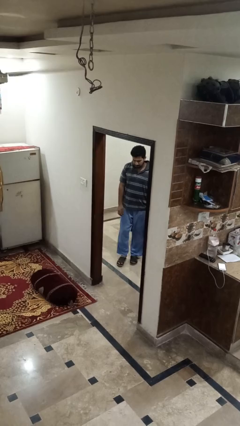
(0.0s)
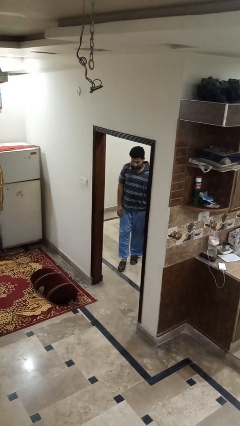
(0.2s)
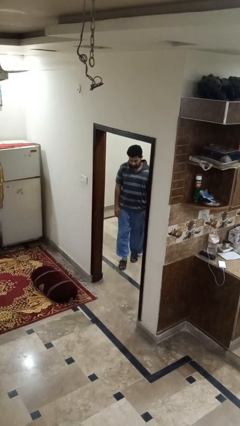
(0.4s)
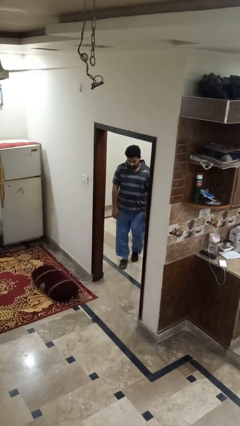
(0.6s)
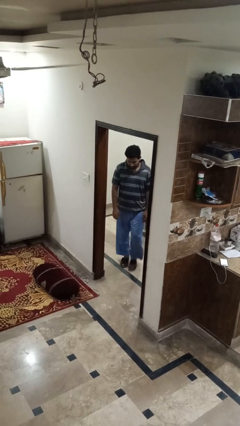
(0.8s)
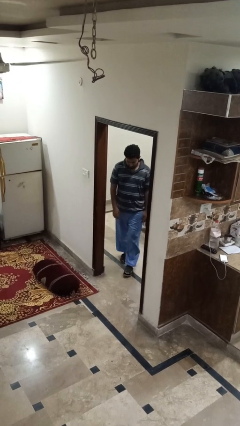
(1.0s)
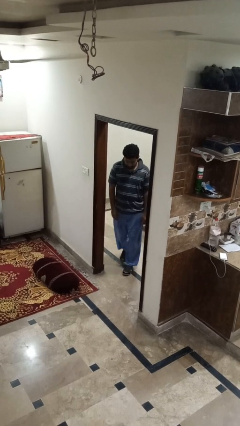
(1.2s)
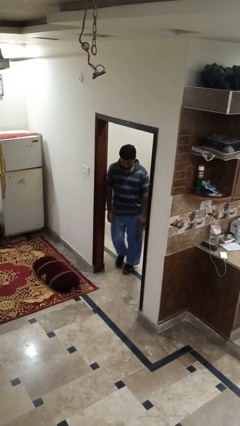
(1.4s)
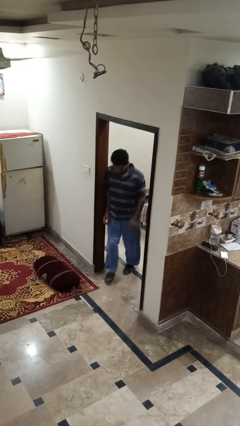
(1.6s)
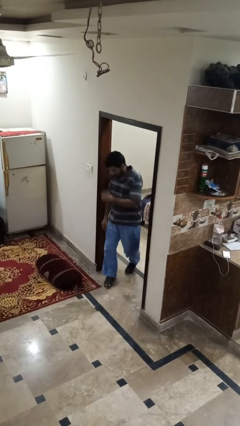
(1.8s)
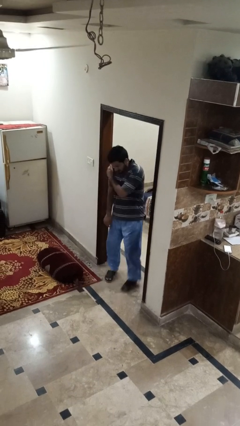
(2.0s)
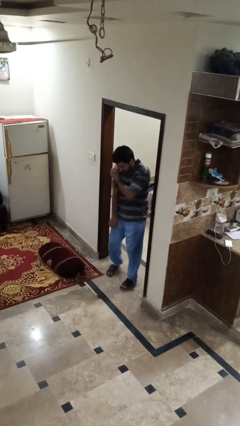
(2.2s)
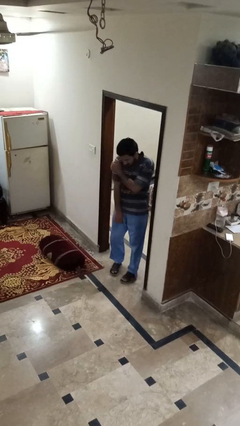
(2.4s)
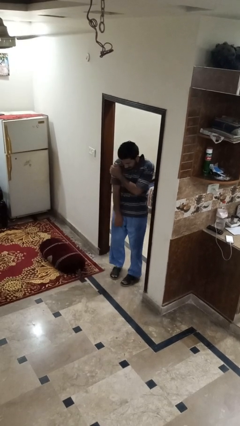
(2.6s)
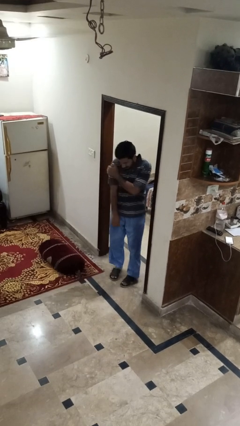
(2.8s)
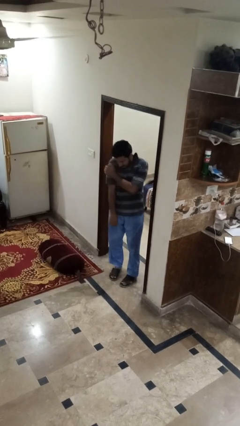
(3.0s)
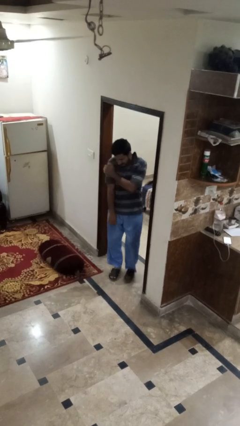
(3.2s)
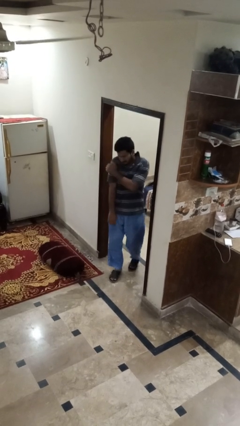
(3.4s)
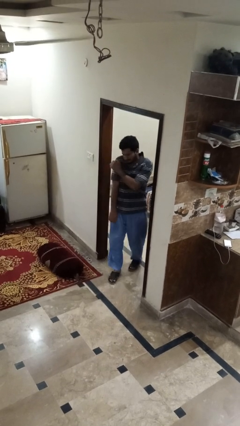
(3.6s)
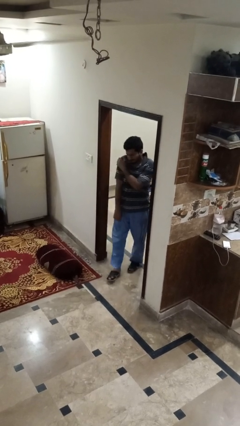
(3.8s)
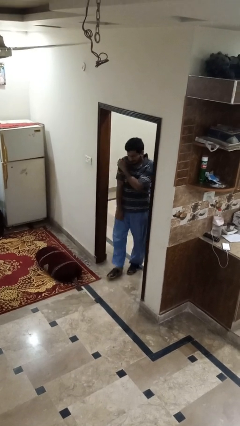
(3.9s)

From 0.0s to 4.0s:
person bumps into wall

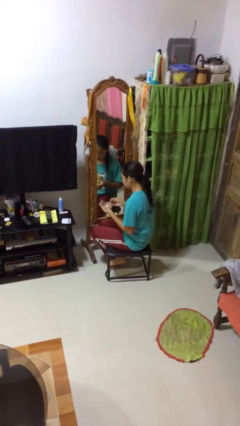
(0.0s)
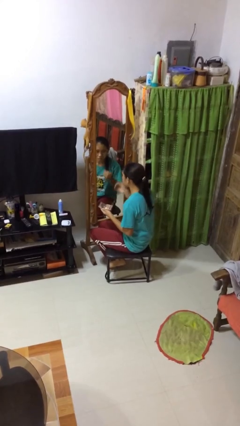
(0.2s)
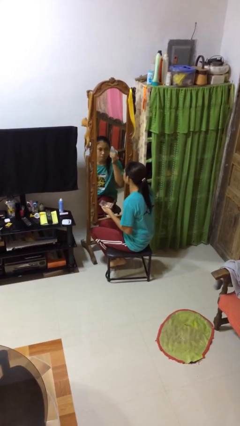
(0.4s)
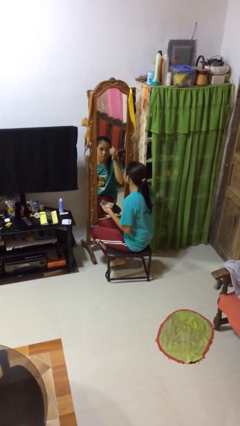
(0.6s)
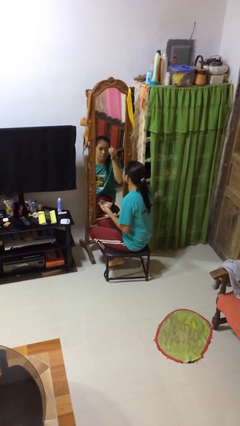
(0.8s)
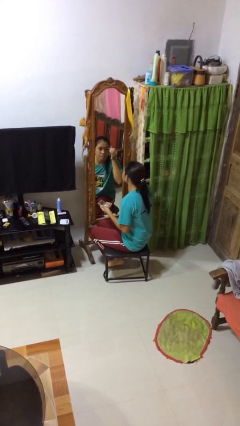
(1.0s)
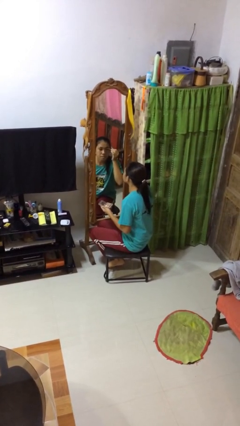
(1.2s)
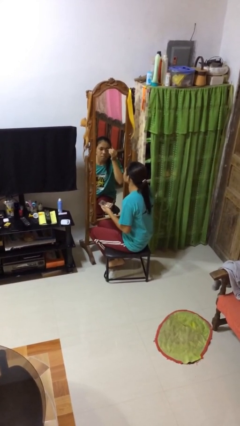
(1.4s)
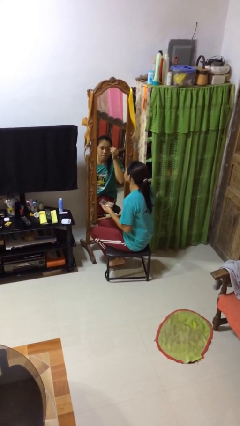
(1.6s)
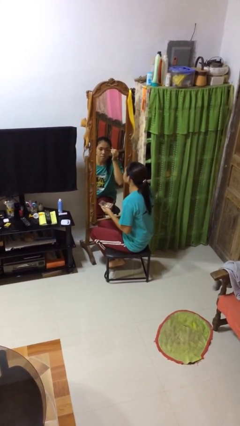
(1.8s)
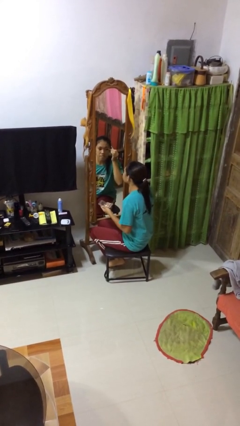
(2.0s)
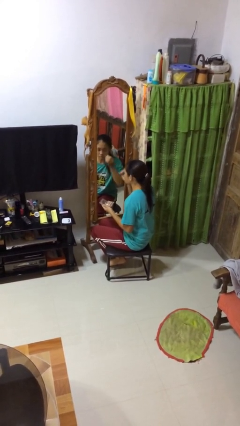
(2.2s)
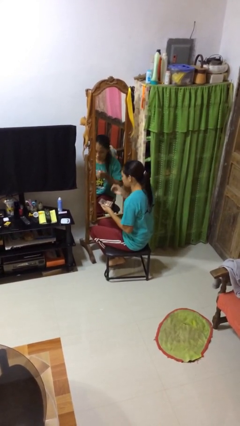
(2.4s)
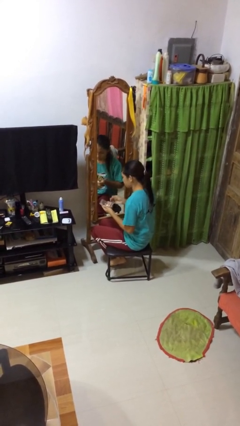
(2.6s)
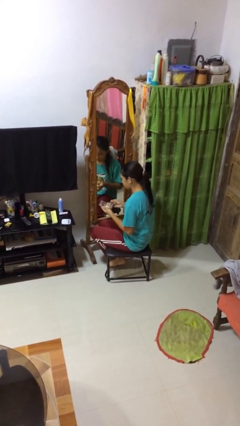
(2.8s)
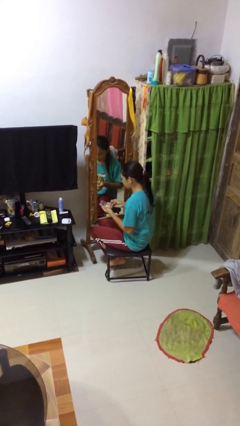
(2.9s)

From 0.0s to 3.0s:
person applies eye makeup

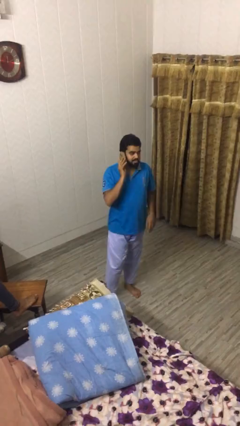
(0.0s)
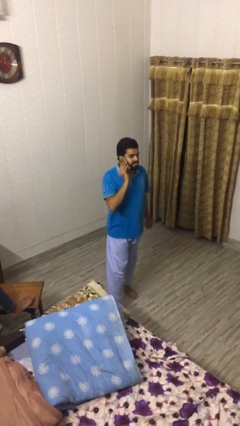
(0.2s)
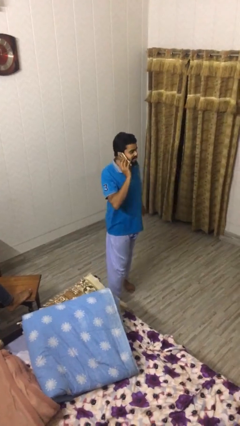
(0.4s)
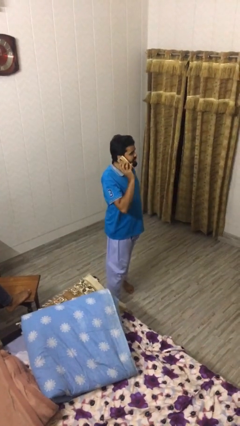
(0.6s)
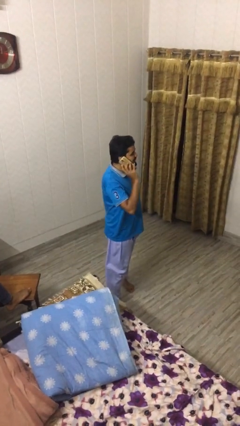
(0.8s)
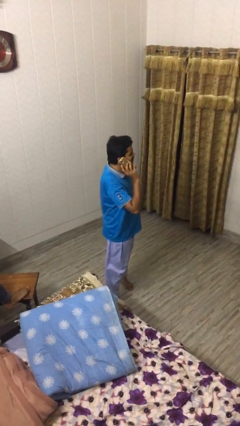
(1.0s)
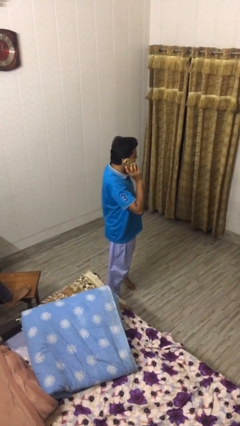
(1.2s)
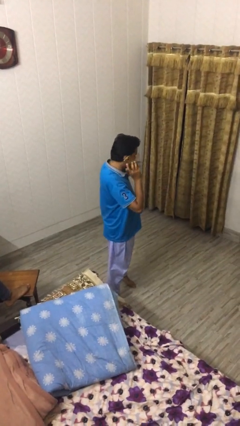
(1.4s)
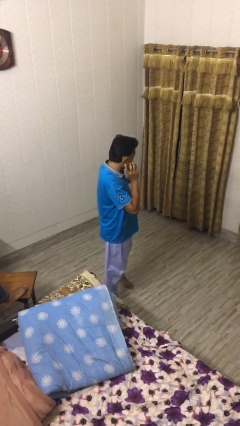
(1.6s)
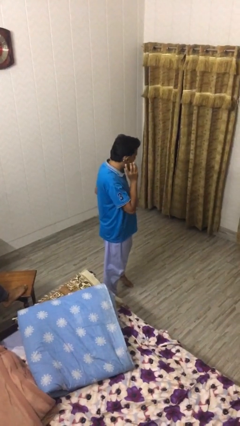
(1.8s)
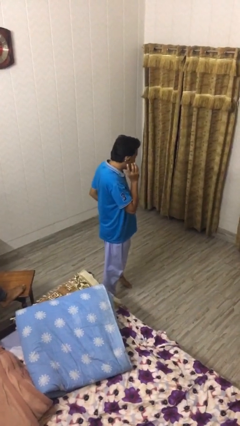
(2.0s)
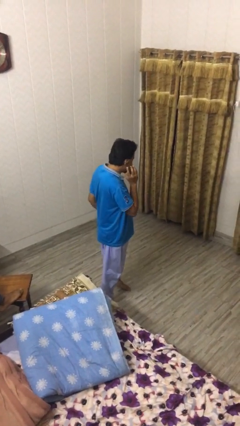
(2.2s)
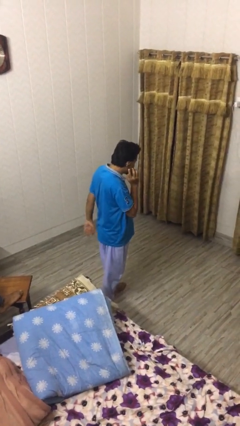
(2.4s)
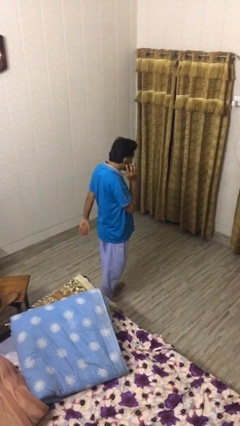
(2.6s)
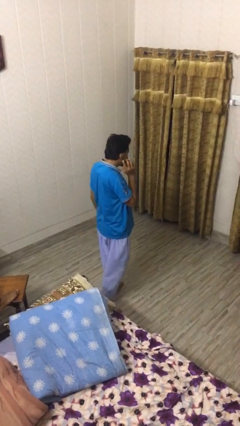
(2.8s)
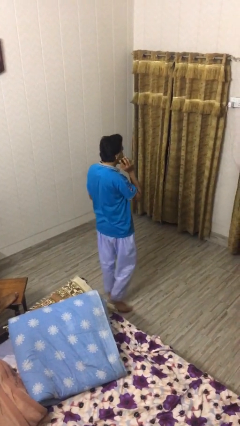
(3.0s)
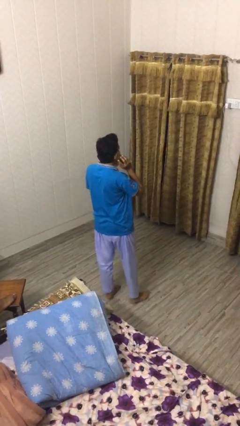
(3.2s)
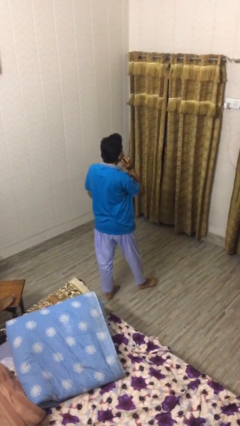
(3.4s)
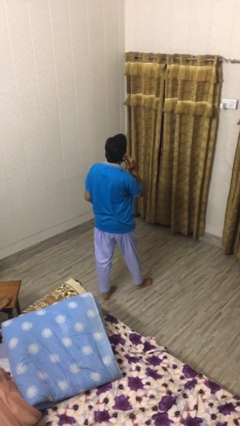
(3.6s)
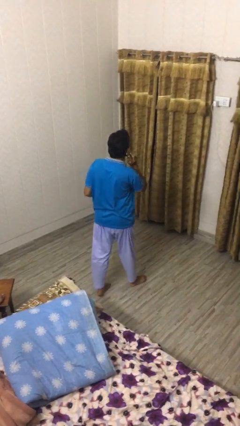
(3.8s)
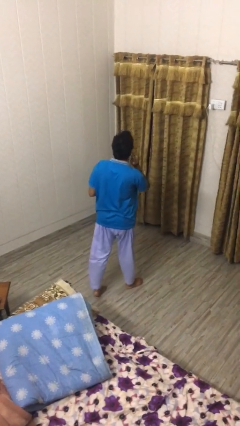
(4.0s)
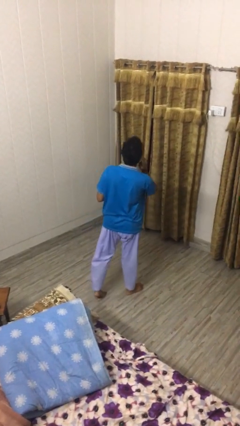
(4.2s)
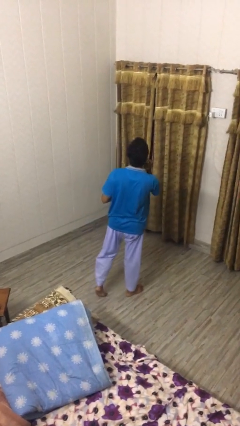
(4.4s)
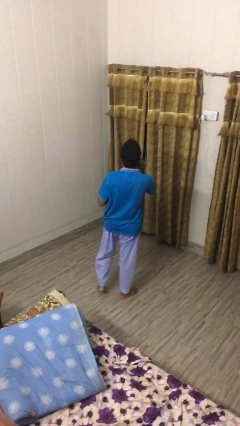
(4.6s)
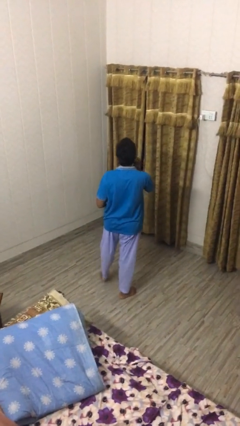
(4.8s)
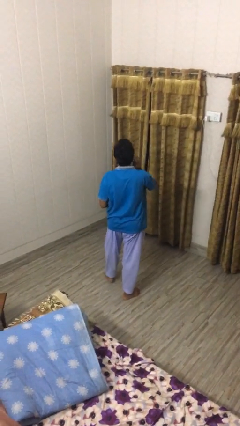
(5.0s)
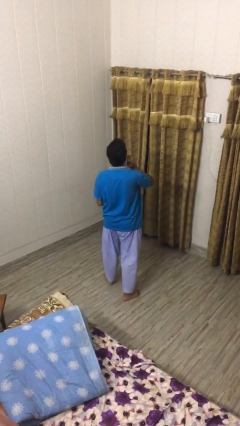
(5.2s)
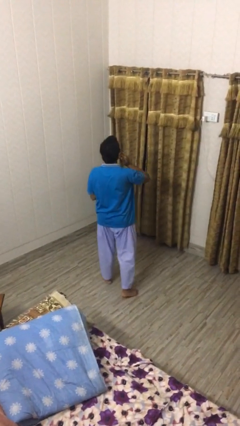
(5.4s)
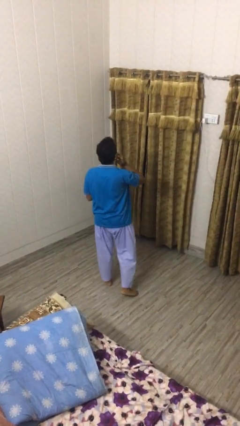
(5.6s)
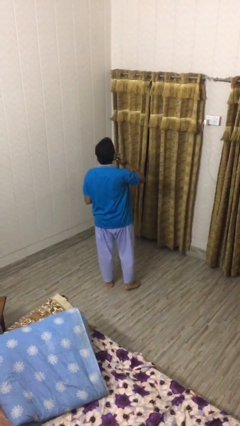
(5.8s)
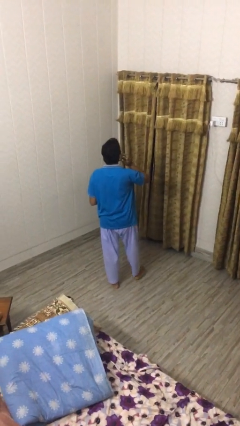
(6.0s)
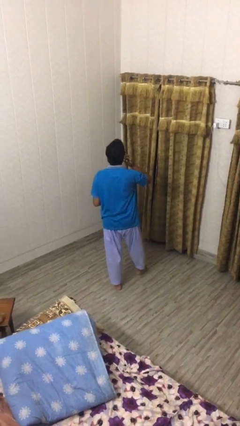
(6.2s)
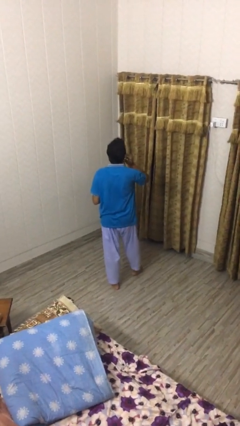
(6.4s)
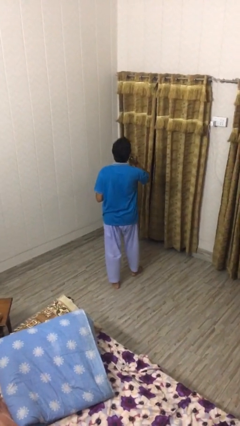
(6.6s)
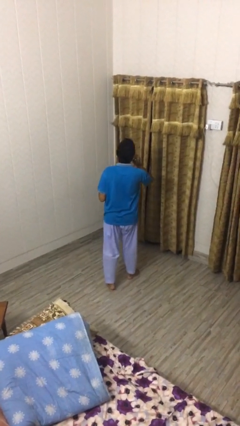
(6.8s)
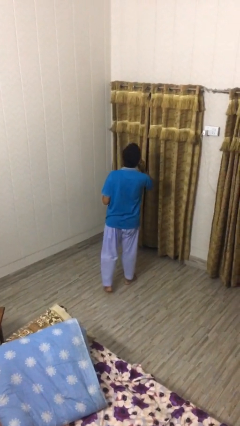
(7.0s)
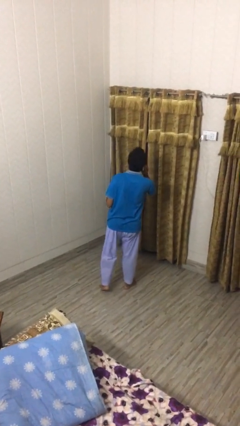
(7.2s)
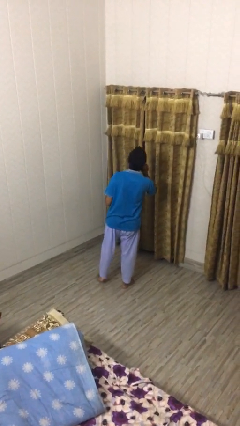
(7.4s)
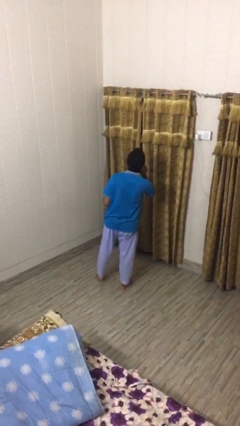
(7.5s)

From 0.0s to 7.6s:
person talks on phone

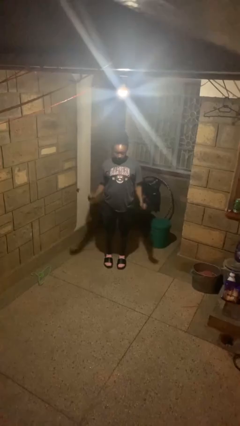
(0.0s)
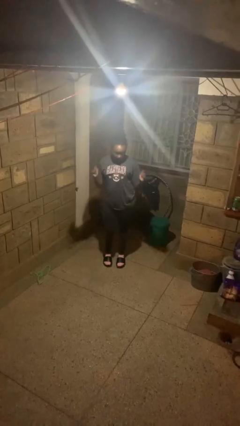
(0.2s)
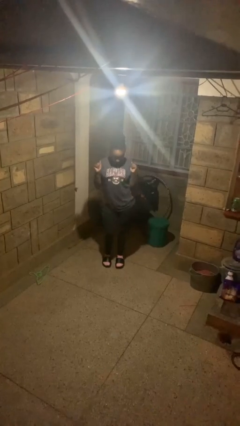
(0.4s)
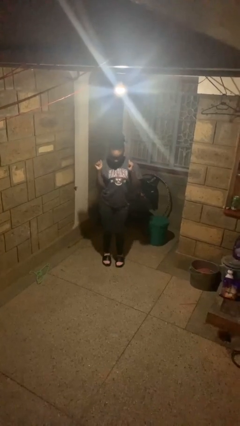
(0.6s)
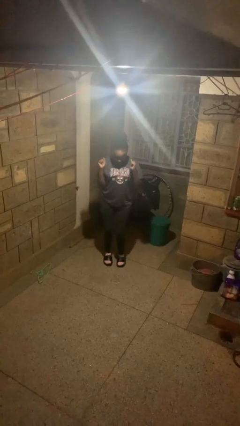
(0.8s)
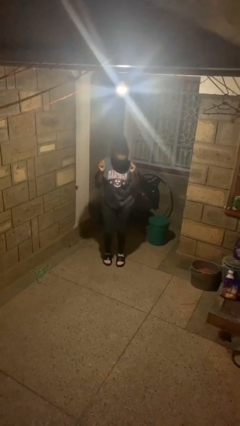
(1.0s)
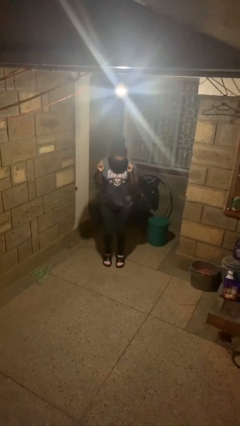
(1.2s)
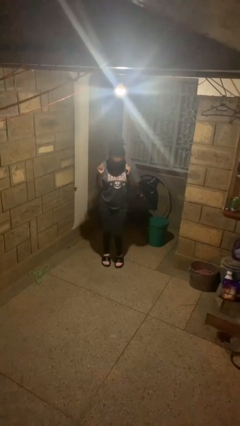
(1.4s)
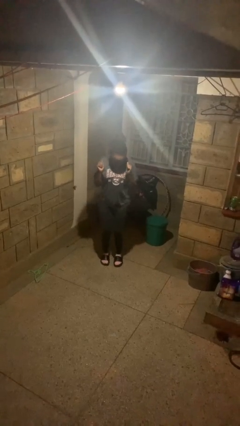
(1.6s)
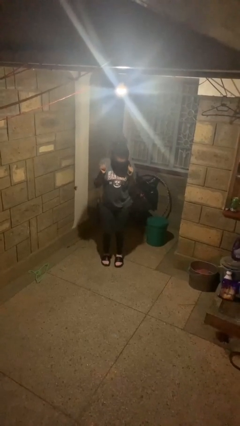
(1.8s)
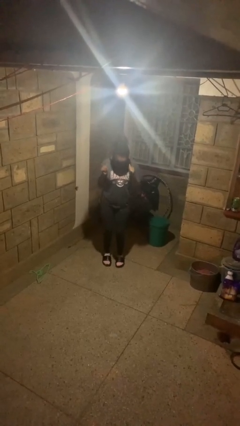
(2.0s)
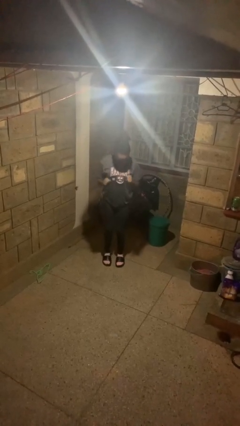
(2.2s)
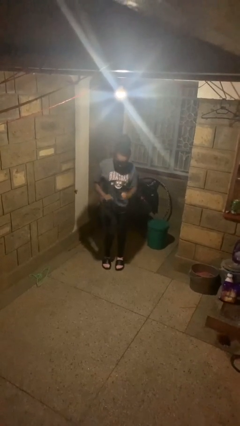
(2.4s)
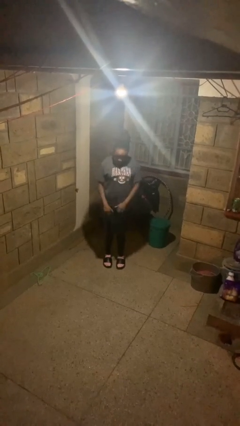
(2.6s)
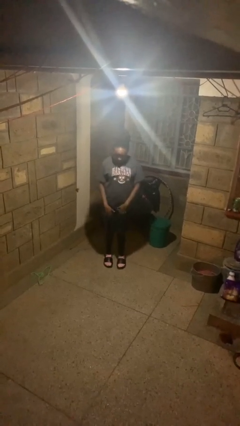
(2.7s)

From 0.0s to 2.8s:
person wiggles hips

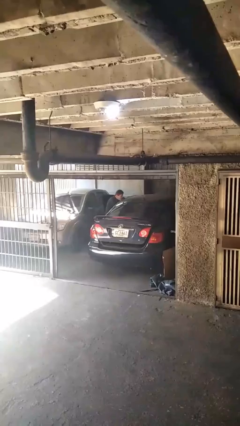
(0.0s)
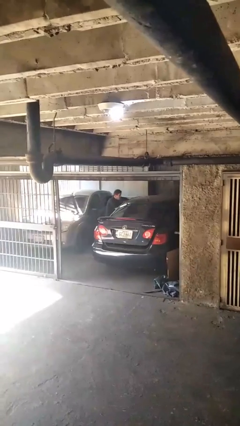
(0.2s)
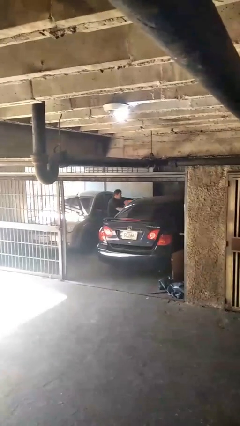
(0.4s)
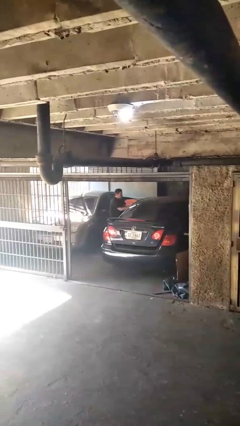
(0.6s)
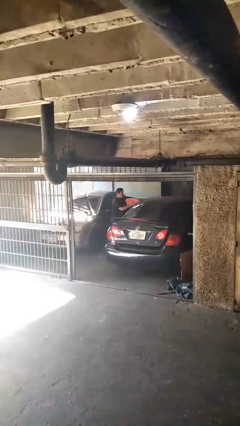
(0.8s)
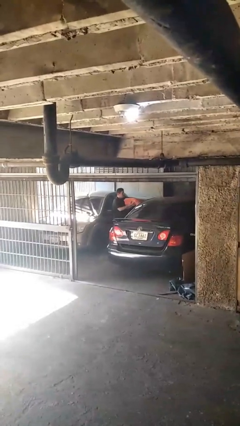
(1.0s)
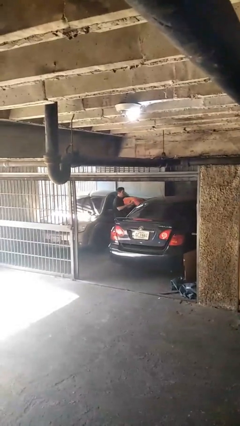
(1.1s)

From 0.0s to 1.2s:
person unloads car
